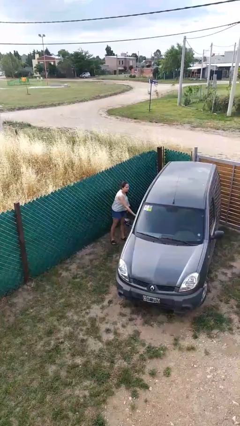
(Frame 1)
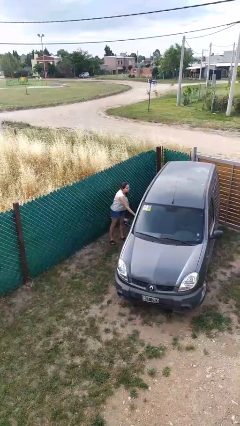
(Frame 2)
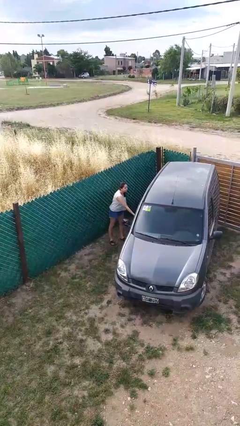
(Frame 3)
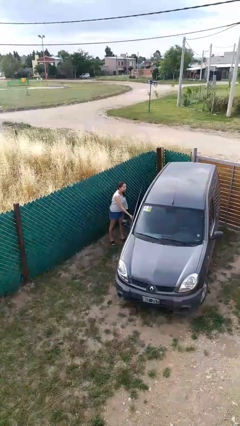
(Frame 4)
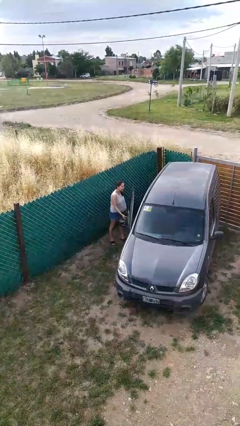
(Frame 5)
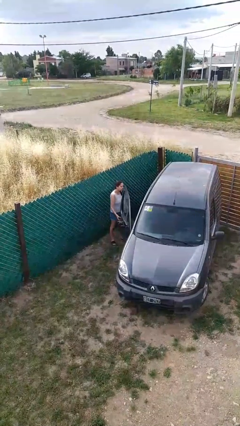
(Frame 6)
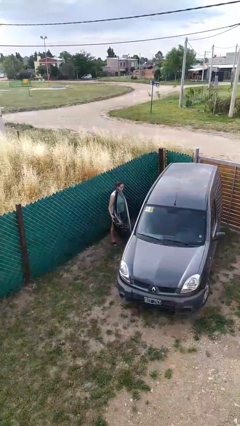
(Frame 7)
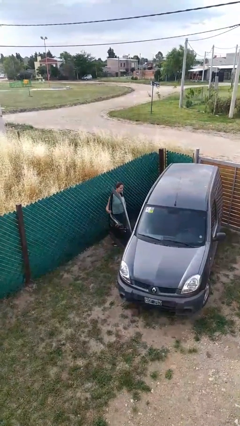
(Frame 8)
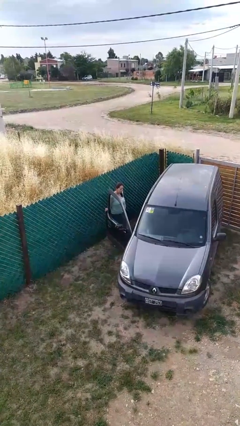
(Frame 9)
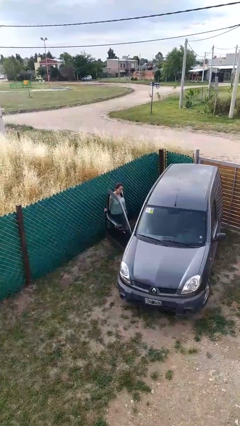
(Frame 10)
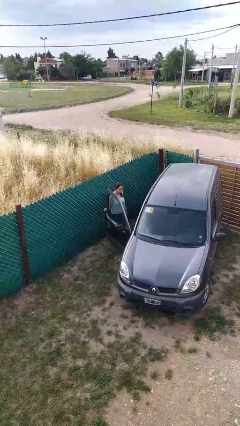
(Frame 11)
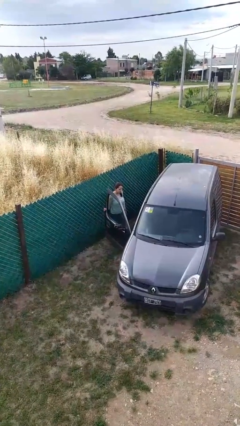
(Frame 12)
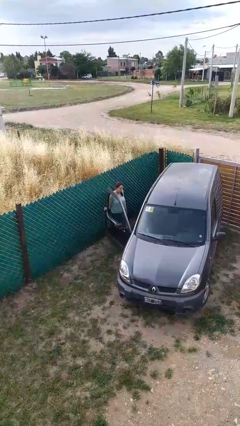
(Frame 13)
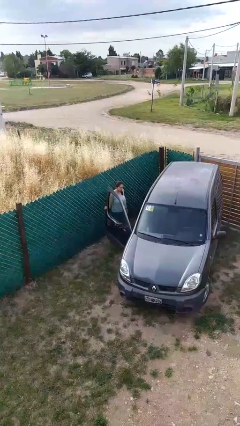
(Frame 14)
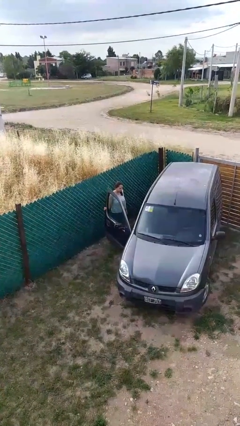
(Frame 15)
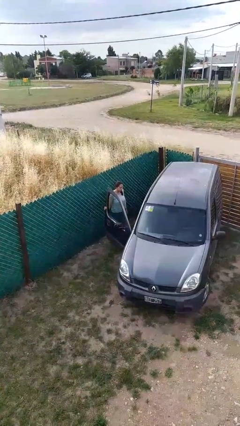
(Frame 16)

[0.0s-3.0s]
person opens car door

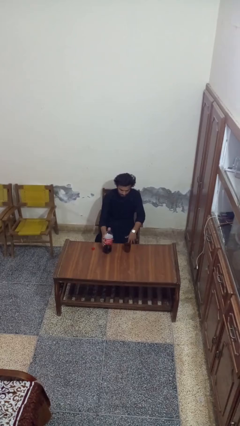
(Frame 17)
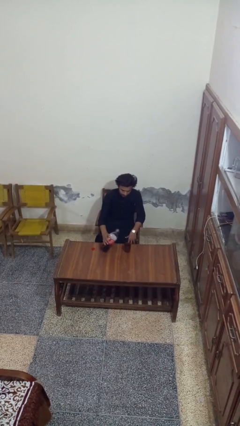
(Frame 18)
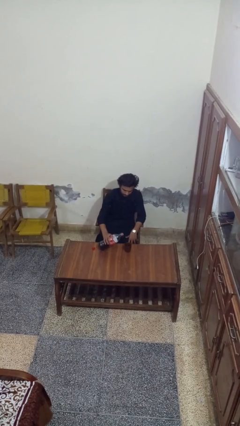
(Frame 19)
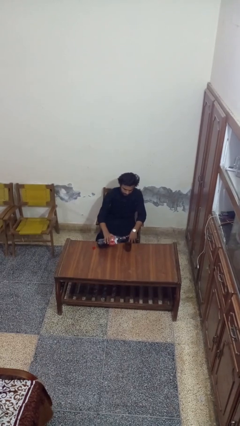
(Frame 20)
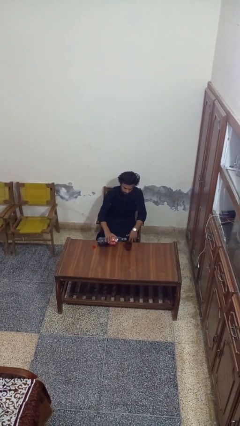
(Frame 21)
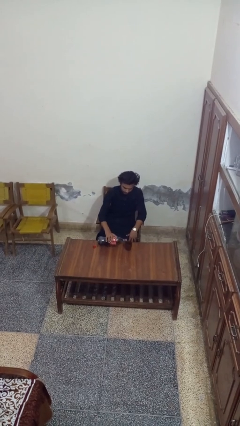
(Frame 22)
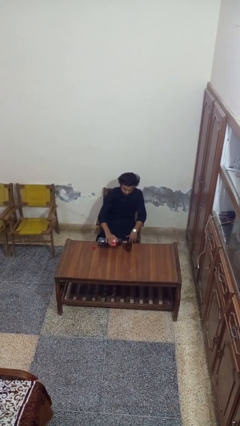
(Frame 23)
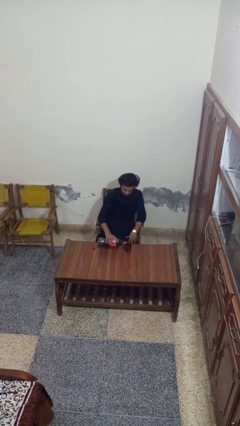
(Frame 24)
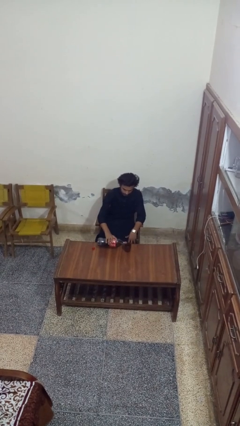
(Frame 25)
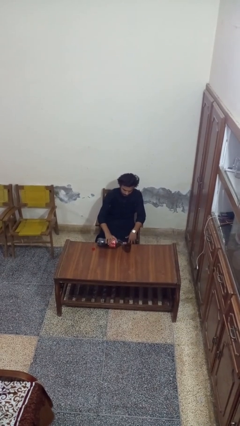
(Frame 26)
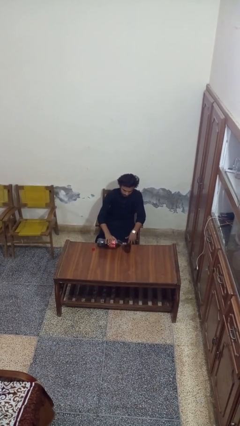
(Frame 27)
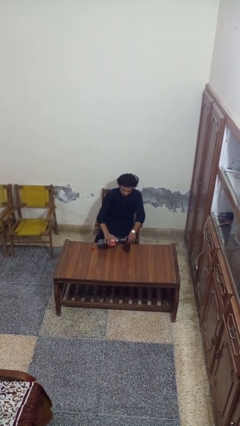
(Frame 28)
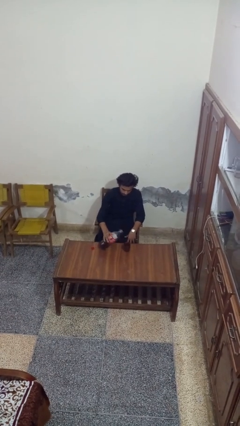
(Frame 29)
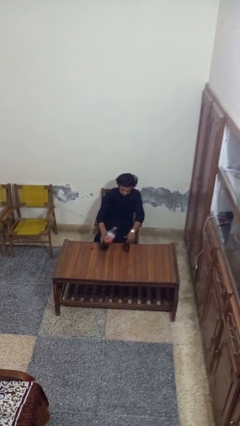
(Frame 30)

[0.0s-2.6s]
person pours liquid into cup

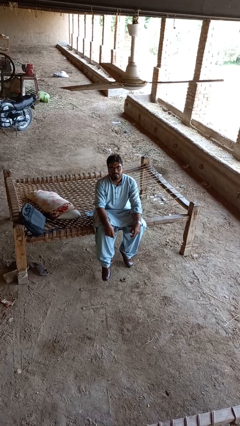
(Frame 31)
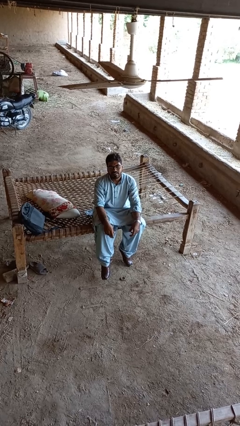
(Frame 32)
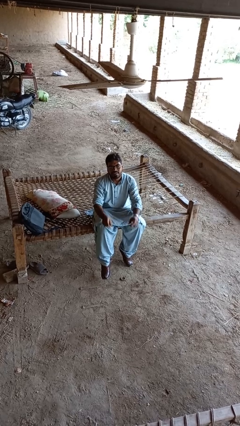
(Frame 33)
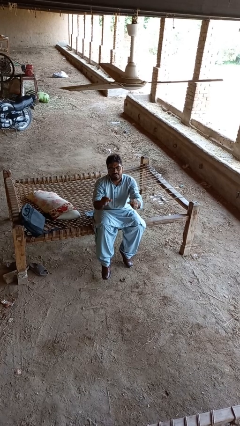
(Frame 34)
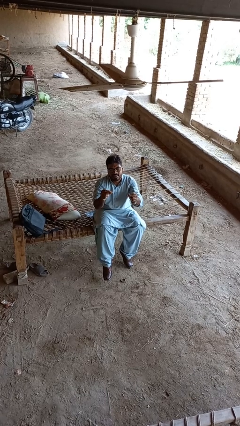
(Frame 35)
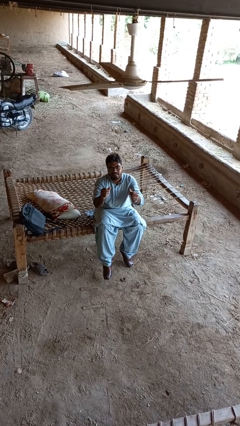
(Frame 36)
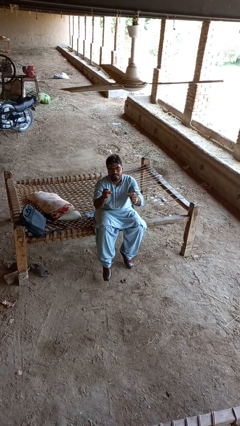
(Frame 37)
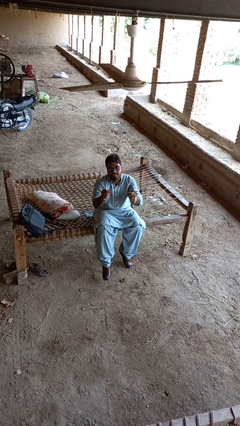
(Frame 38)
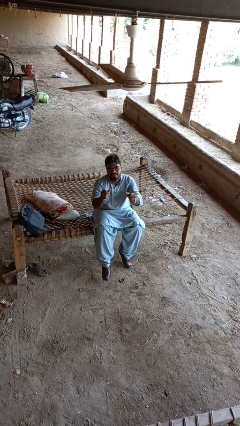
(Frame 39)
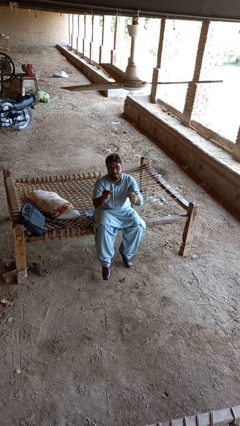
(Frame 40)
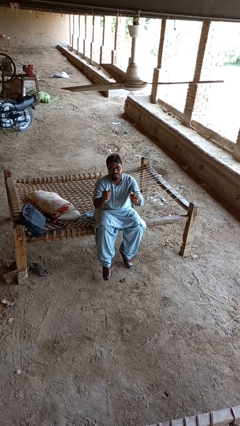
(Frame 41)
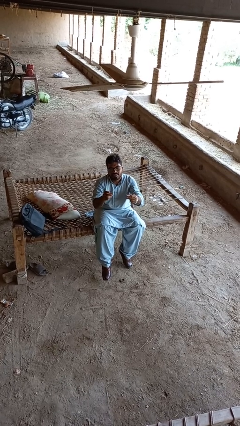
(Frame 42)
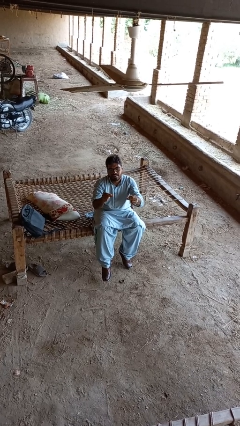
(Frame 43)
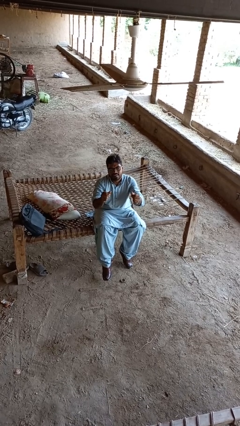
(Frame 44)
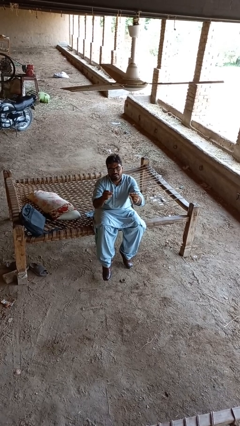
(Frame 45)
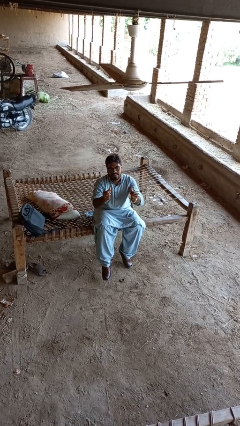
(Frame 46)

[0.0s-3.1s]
person snaps fingers

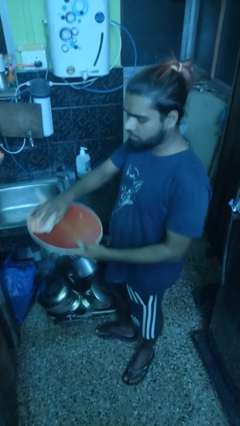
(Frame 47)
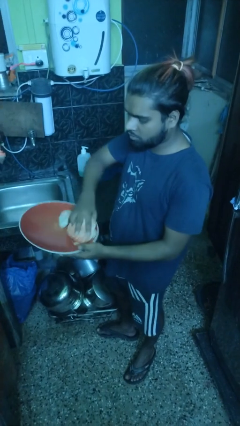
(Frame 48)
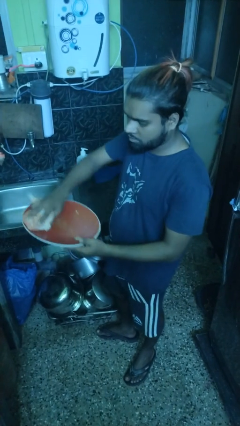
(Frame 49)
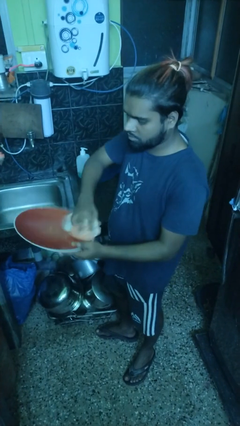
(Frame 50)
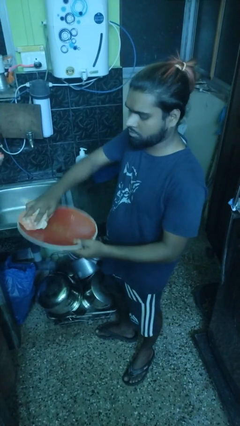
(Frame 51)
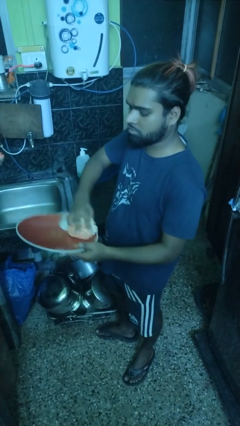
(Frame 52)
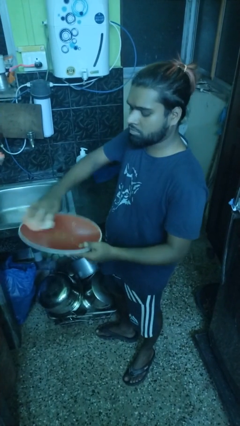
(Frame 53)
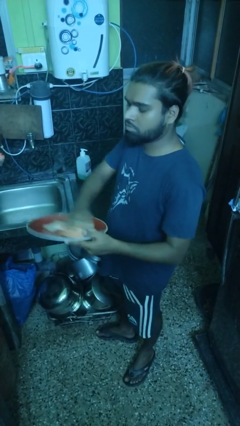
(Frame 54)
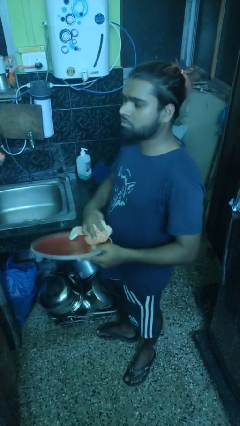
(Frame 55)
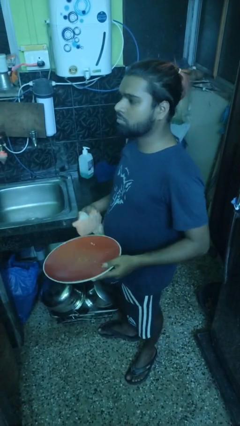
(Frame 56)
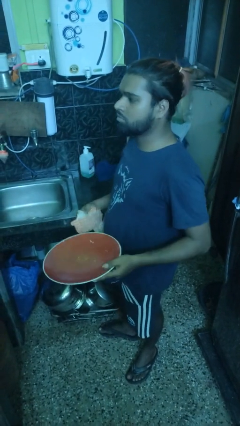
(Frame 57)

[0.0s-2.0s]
person dries dish

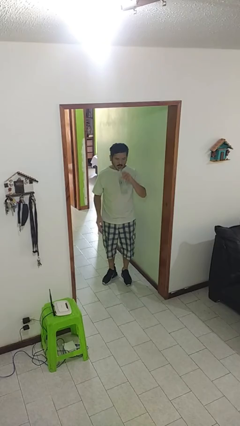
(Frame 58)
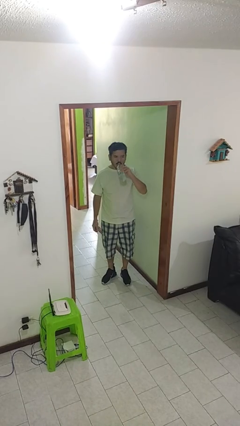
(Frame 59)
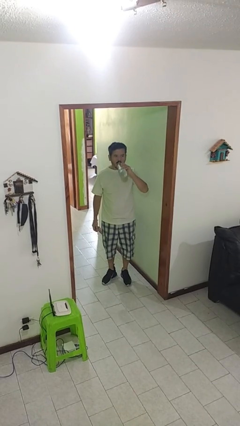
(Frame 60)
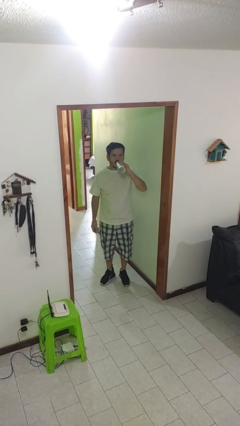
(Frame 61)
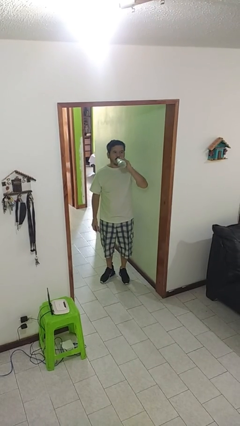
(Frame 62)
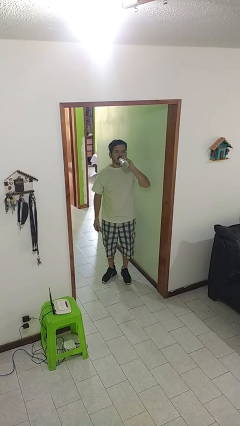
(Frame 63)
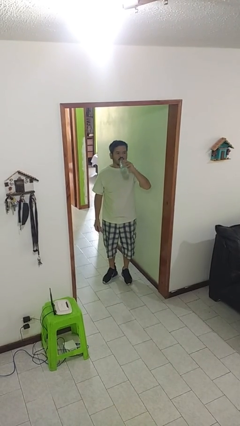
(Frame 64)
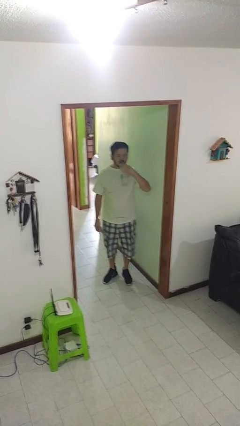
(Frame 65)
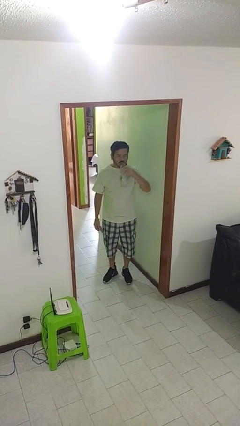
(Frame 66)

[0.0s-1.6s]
person drinks from bottle

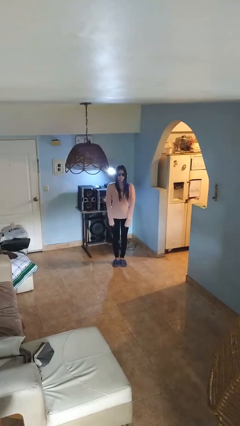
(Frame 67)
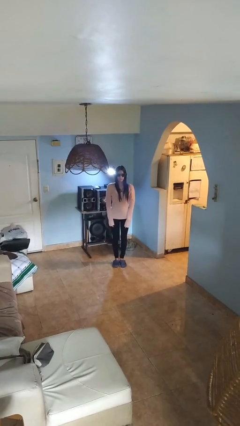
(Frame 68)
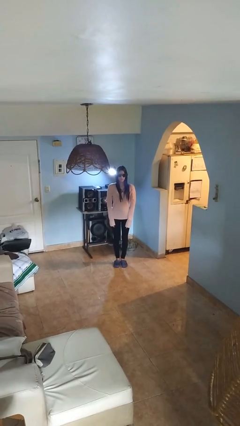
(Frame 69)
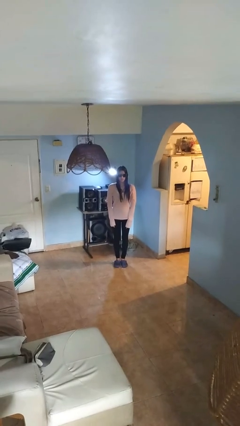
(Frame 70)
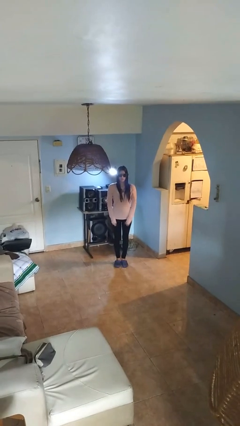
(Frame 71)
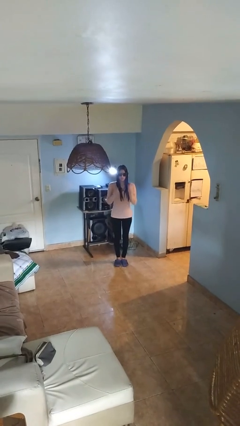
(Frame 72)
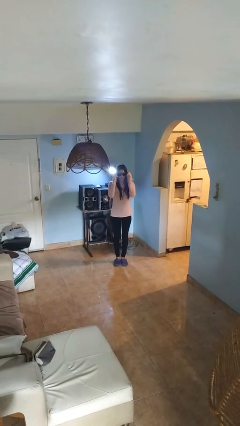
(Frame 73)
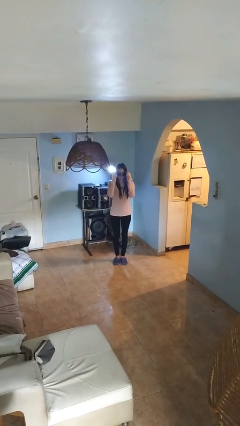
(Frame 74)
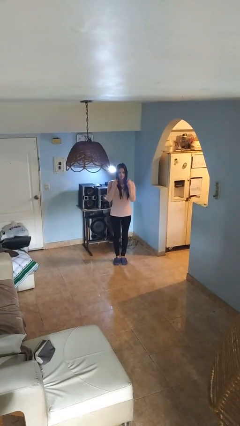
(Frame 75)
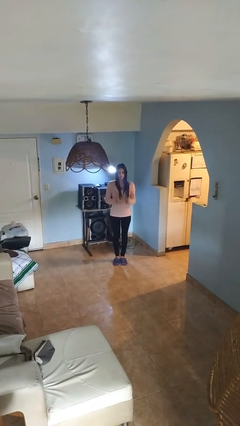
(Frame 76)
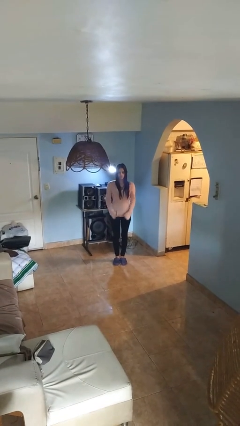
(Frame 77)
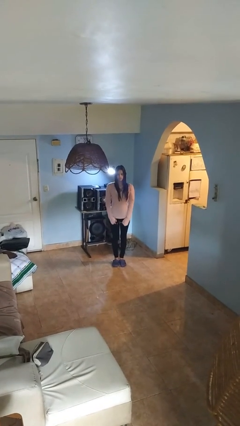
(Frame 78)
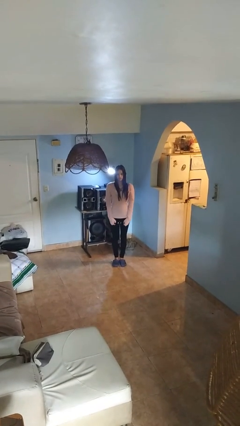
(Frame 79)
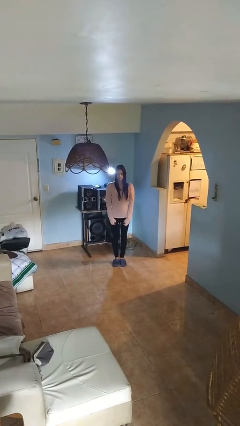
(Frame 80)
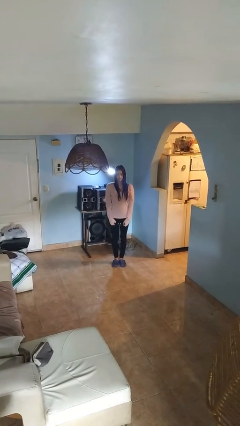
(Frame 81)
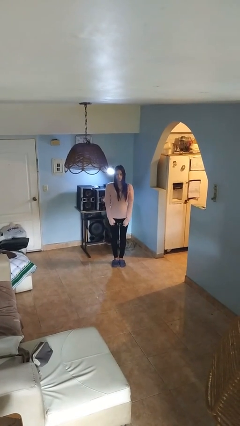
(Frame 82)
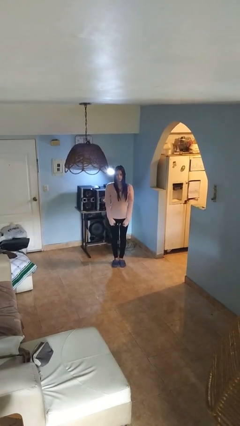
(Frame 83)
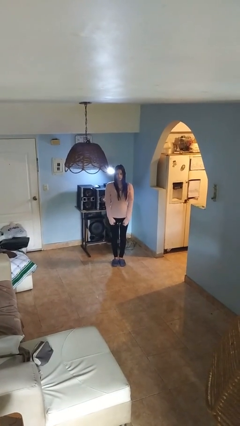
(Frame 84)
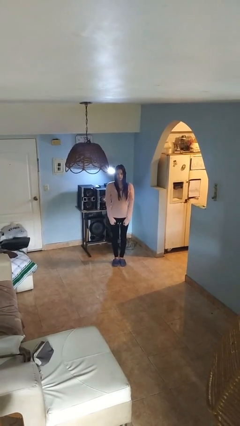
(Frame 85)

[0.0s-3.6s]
person takes off sunglasses

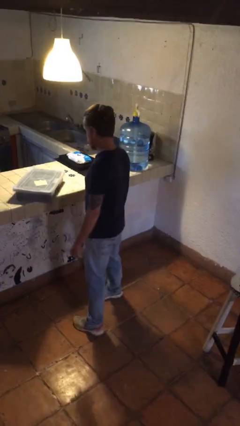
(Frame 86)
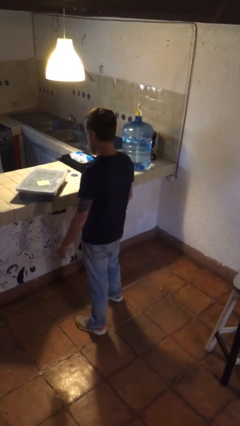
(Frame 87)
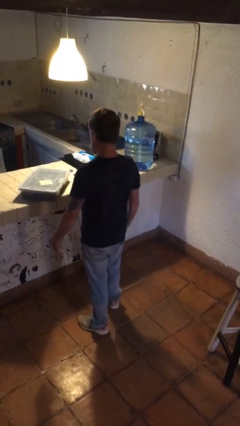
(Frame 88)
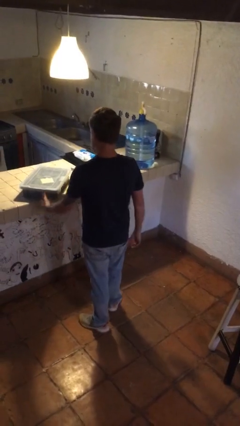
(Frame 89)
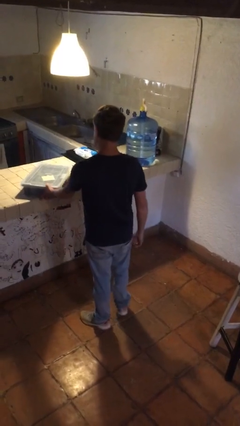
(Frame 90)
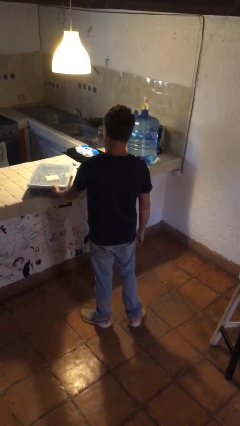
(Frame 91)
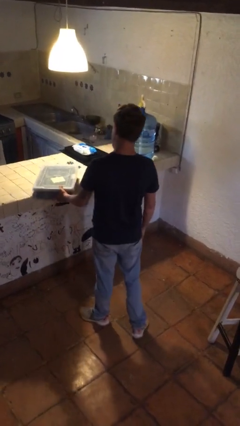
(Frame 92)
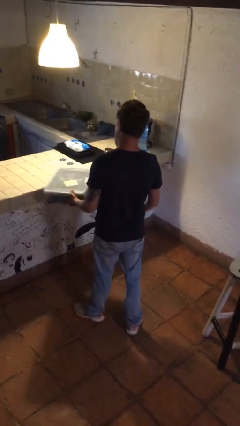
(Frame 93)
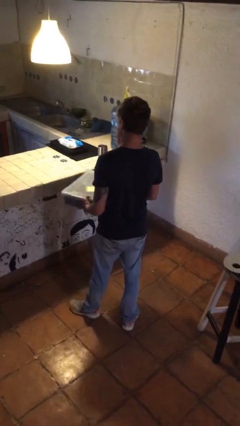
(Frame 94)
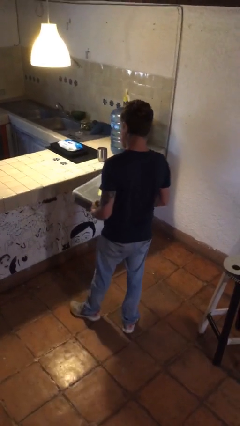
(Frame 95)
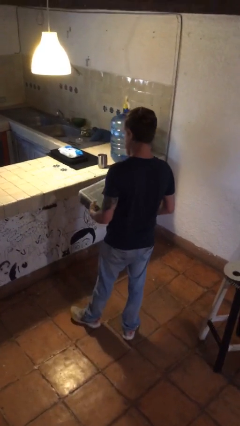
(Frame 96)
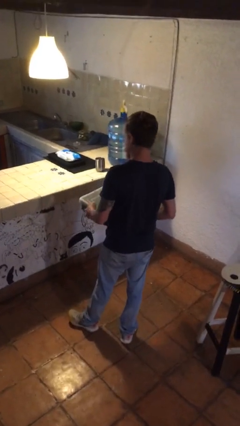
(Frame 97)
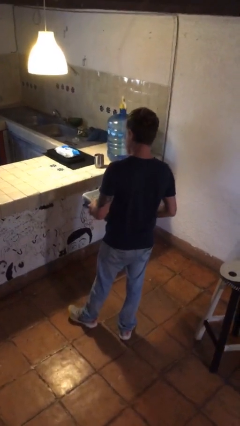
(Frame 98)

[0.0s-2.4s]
person picks up object from countertop
